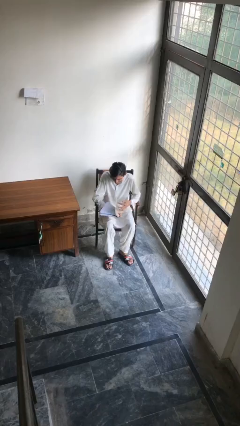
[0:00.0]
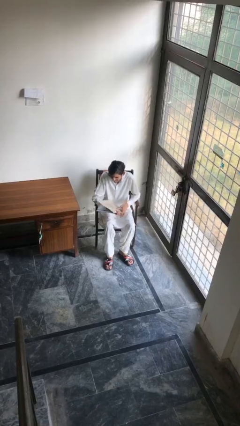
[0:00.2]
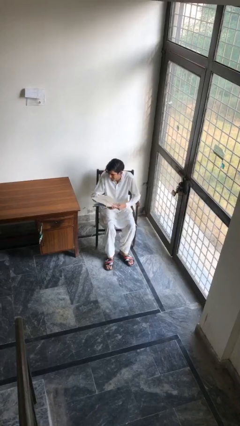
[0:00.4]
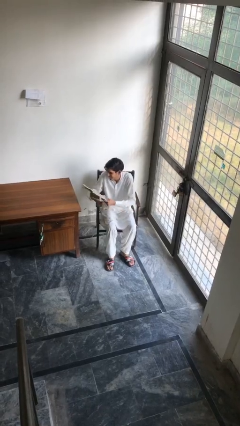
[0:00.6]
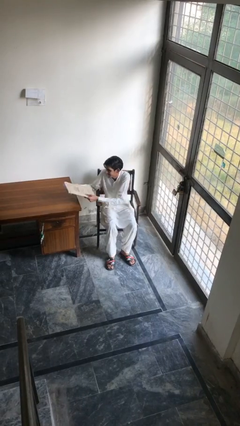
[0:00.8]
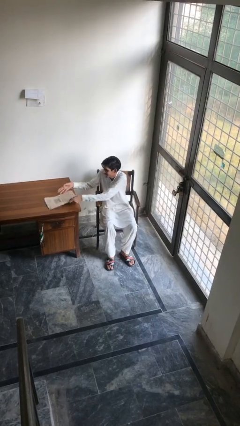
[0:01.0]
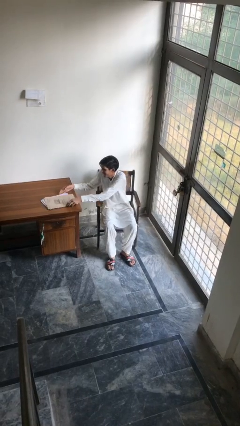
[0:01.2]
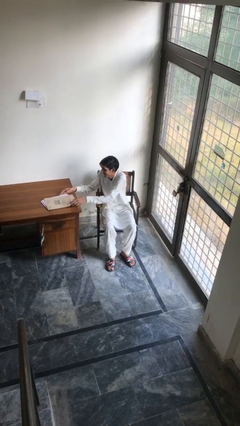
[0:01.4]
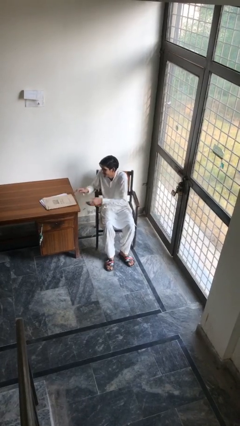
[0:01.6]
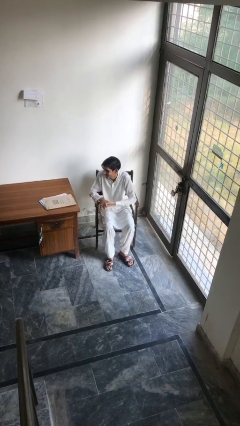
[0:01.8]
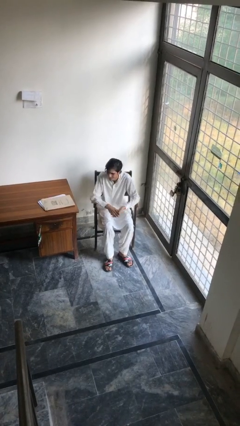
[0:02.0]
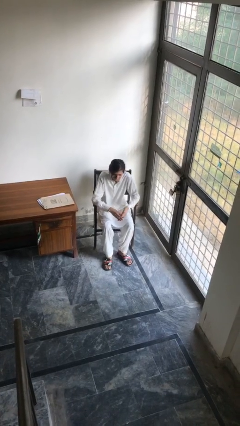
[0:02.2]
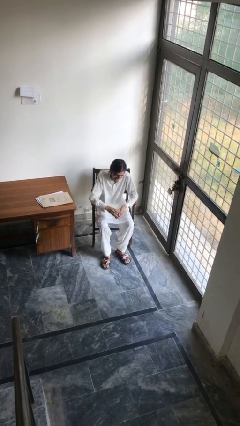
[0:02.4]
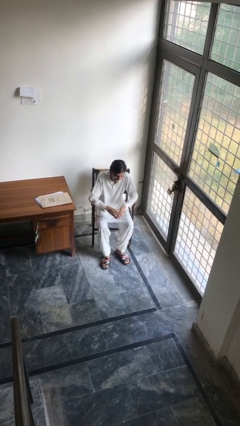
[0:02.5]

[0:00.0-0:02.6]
person puts down object on table

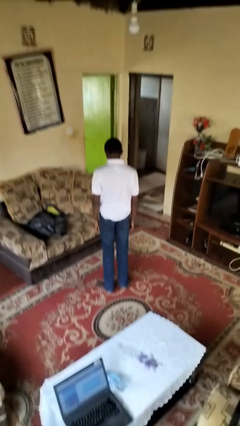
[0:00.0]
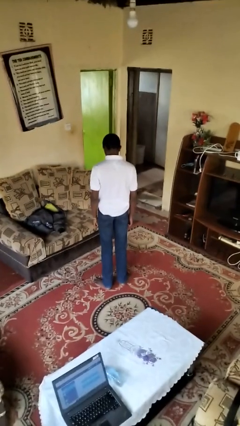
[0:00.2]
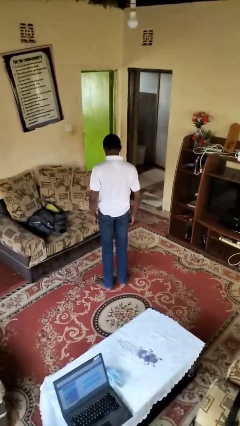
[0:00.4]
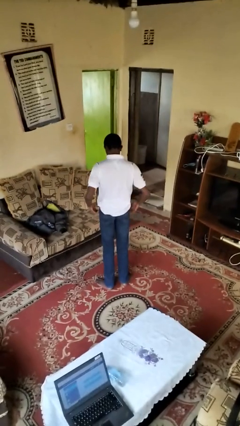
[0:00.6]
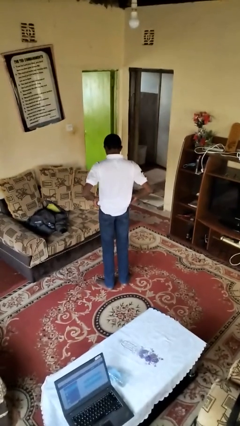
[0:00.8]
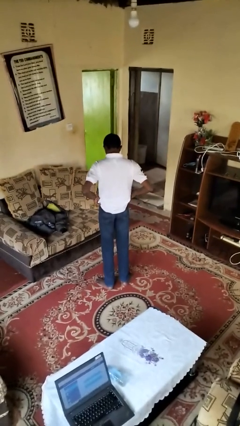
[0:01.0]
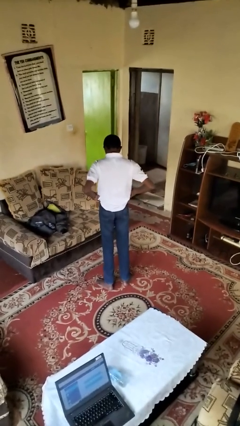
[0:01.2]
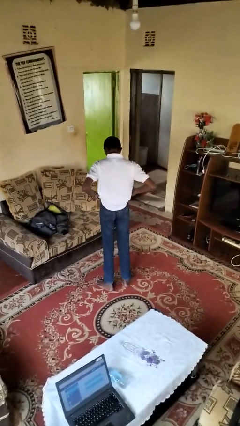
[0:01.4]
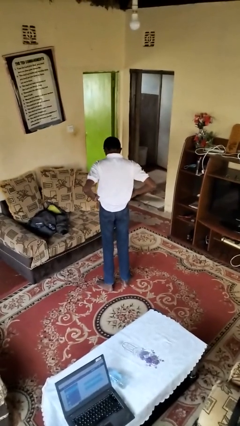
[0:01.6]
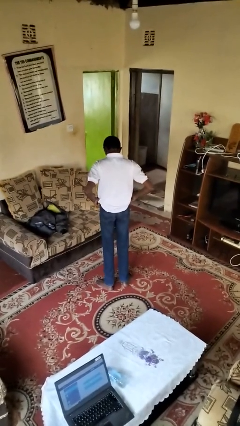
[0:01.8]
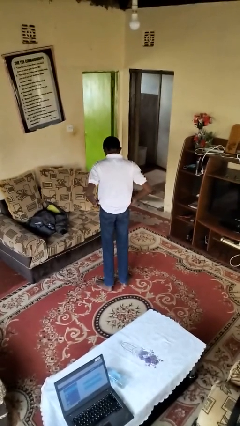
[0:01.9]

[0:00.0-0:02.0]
person hikes up pants

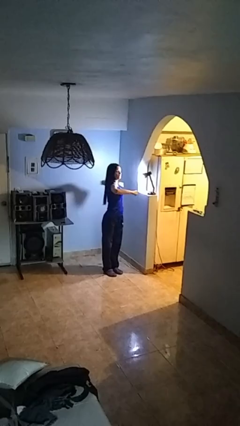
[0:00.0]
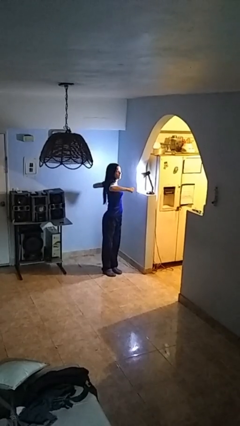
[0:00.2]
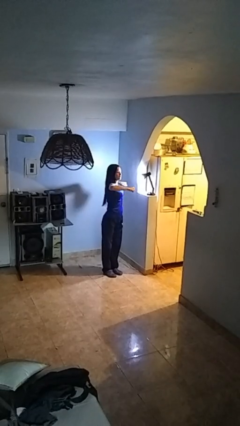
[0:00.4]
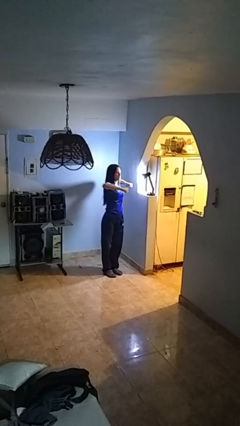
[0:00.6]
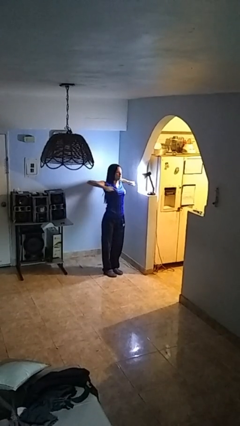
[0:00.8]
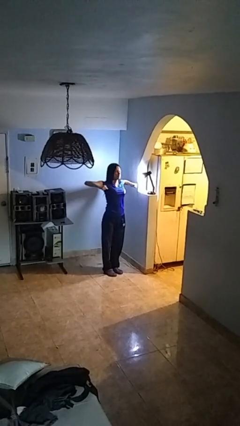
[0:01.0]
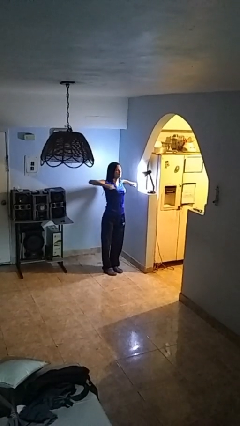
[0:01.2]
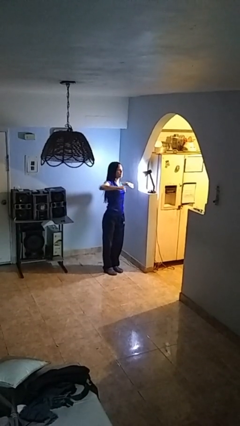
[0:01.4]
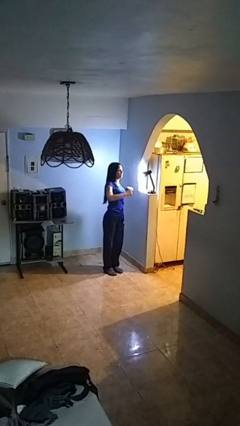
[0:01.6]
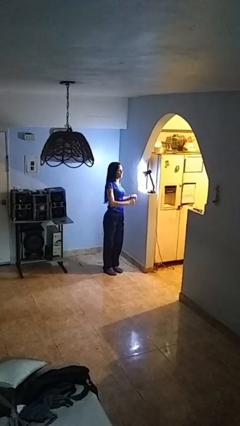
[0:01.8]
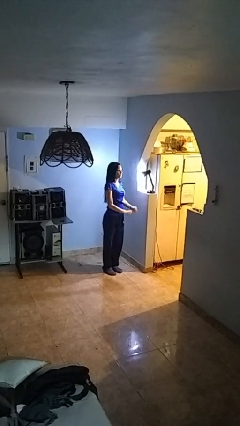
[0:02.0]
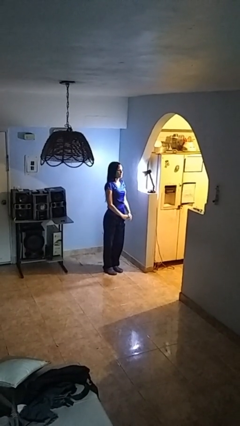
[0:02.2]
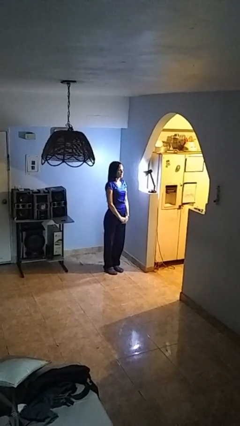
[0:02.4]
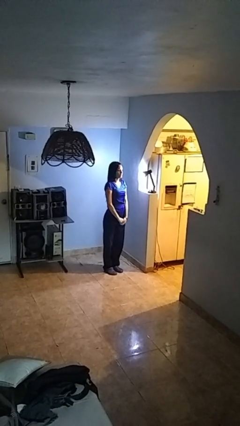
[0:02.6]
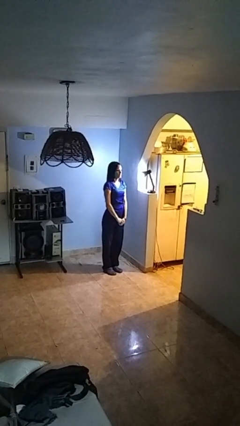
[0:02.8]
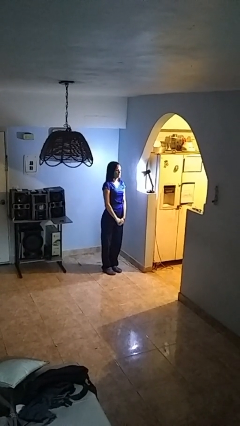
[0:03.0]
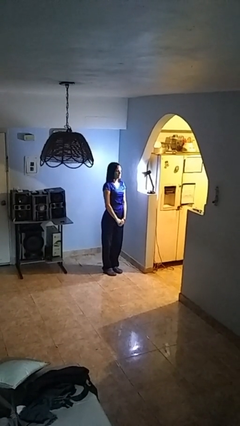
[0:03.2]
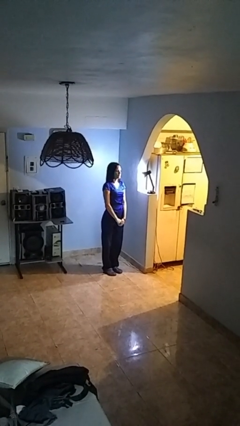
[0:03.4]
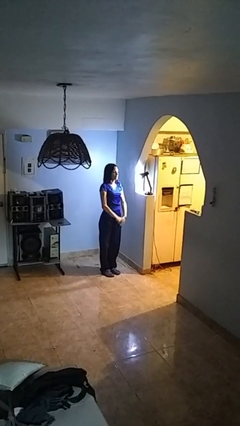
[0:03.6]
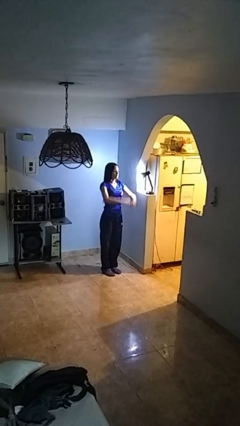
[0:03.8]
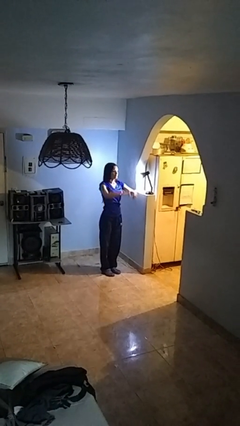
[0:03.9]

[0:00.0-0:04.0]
person stretches arms to side

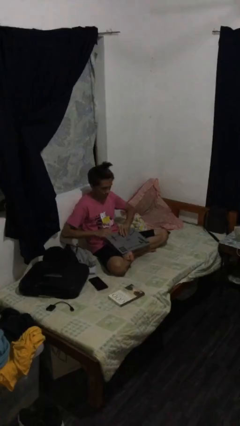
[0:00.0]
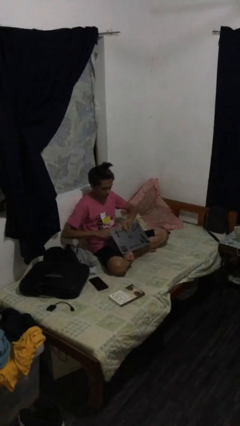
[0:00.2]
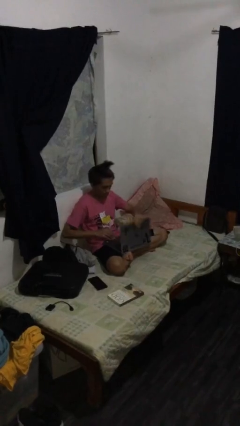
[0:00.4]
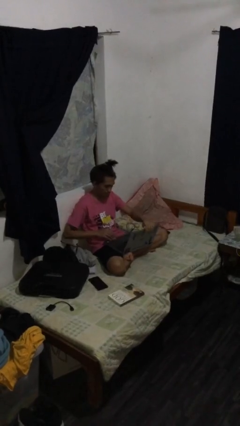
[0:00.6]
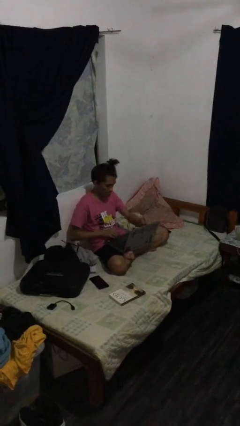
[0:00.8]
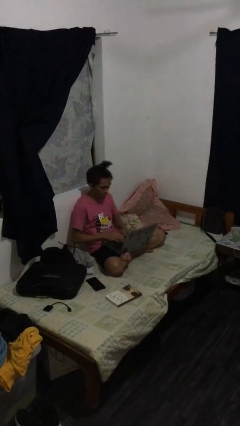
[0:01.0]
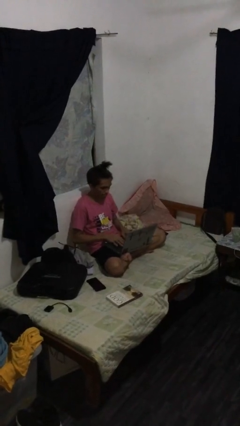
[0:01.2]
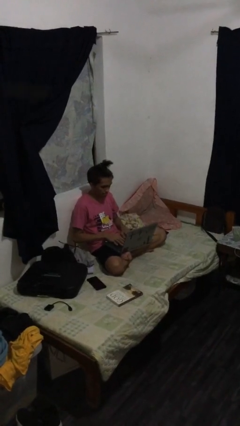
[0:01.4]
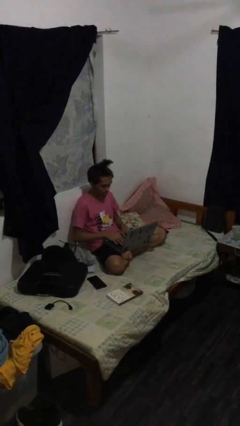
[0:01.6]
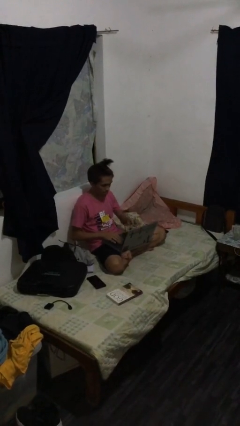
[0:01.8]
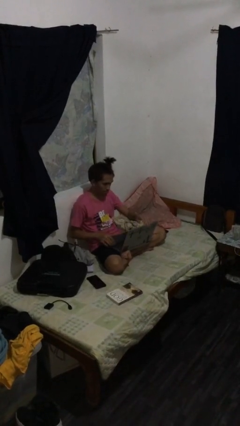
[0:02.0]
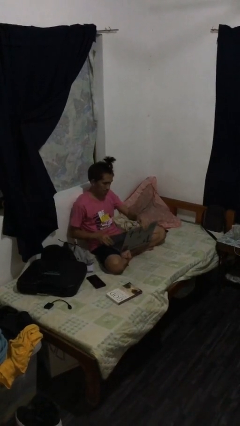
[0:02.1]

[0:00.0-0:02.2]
person interacts with laptop

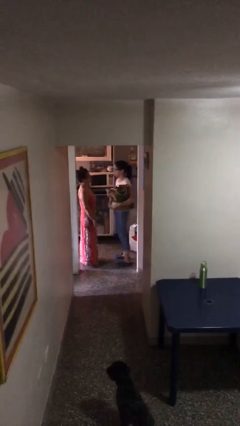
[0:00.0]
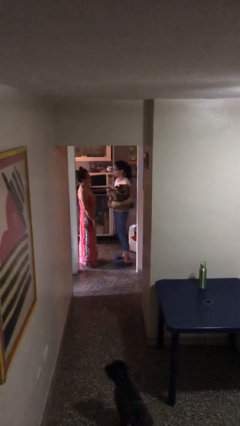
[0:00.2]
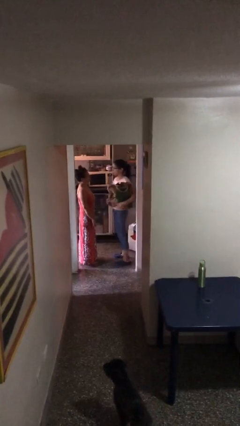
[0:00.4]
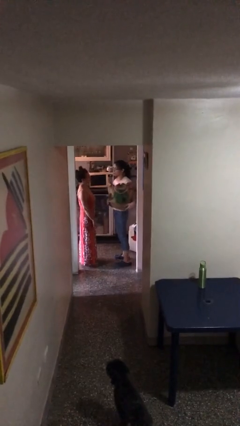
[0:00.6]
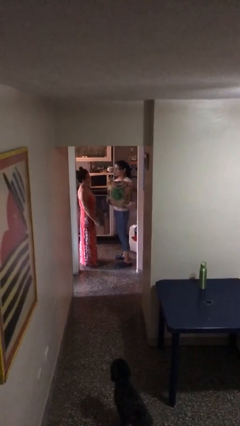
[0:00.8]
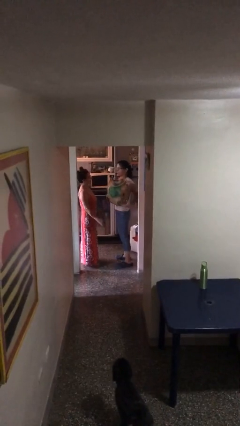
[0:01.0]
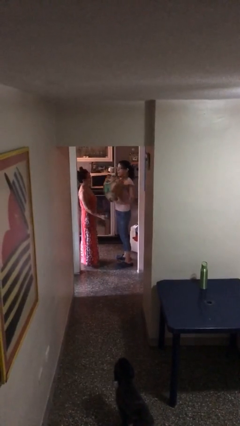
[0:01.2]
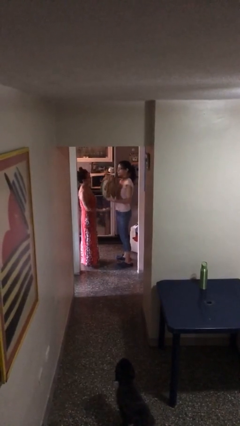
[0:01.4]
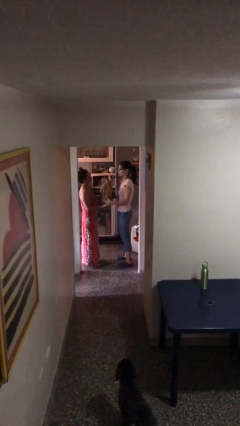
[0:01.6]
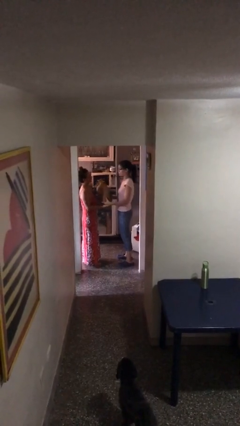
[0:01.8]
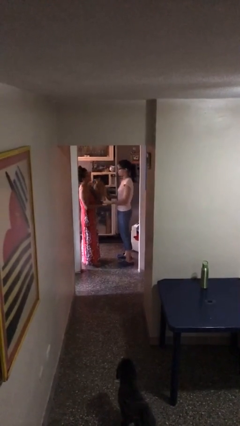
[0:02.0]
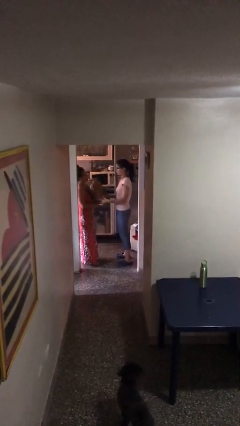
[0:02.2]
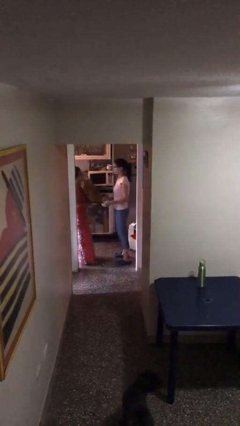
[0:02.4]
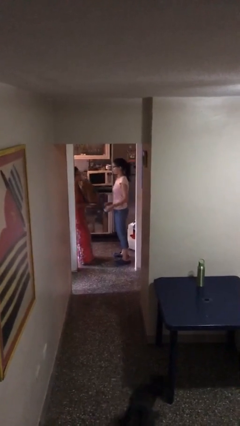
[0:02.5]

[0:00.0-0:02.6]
person transfers object to person

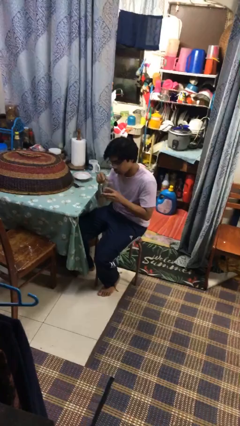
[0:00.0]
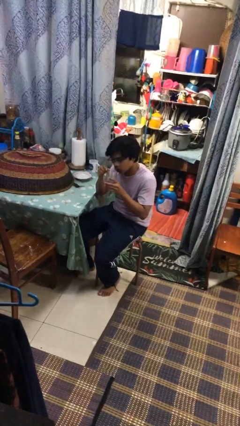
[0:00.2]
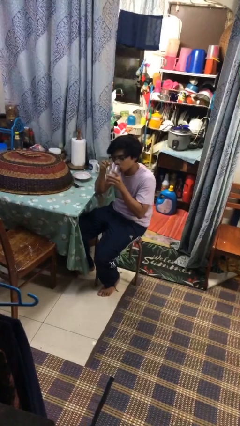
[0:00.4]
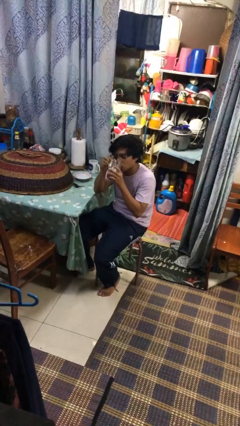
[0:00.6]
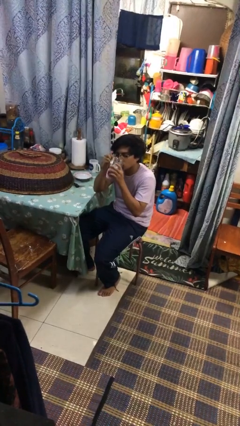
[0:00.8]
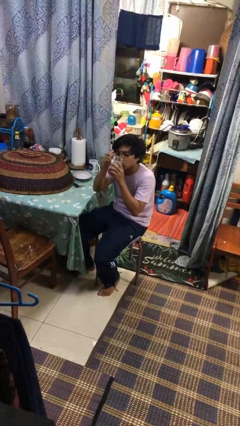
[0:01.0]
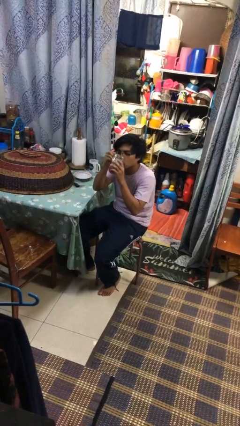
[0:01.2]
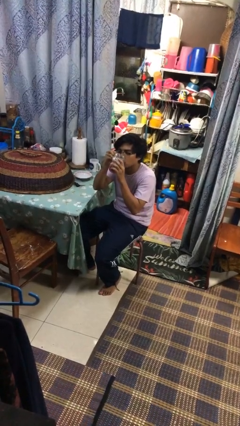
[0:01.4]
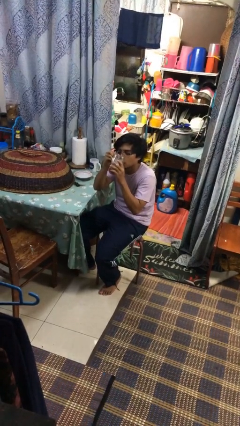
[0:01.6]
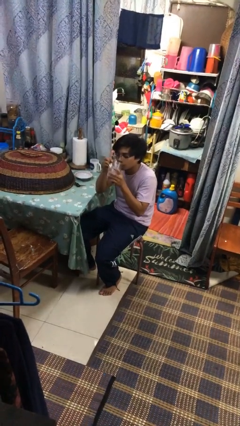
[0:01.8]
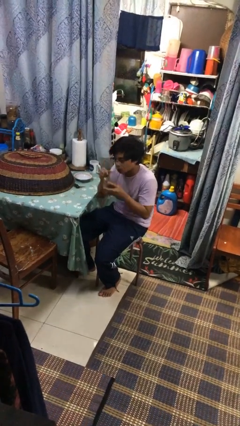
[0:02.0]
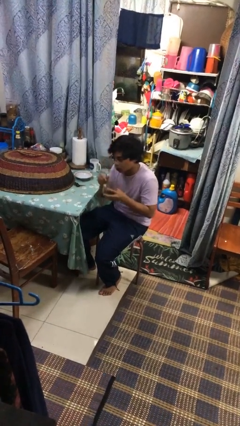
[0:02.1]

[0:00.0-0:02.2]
person drinks from mug

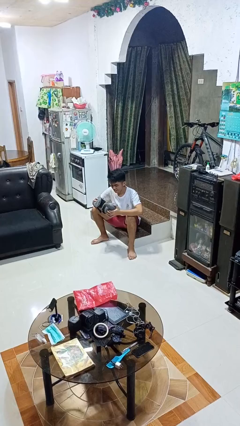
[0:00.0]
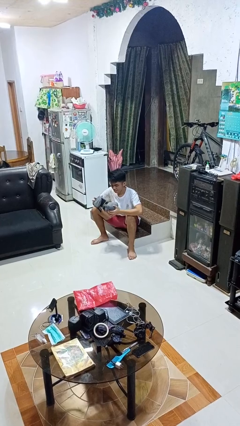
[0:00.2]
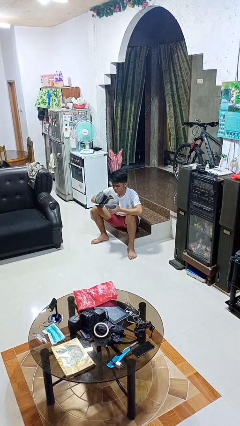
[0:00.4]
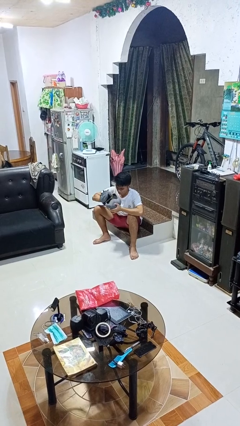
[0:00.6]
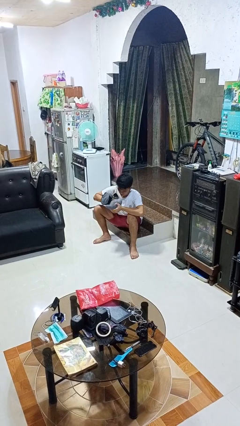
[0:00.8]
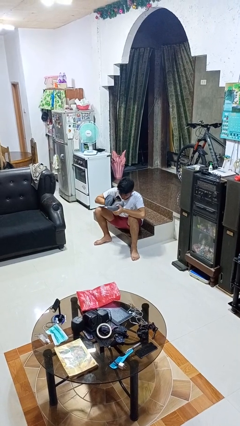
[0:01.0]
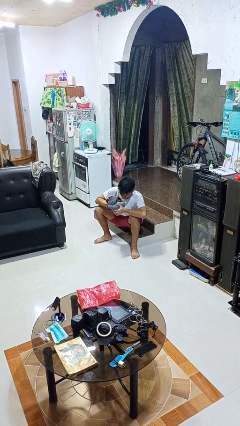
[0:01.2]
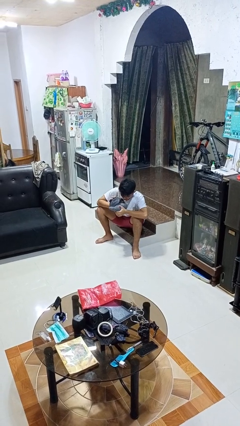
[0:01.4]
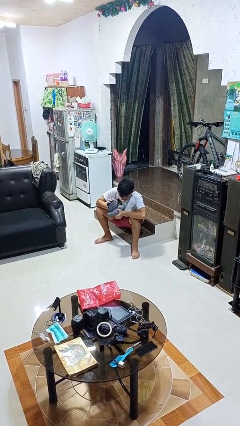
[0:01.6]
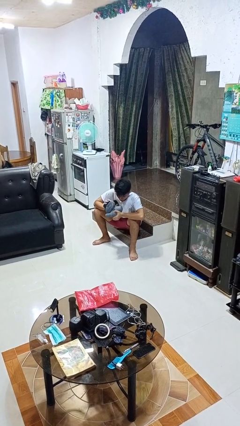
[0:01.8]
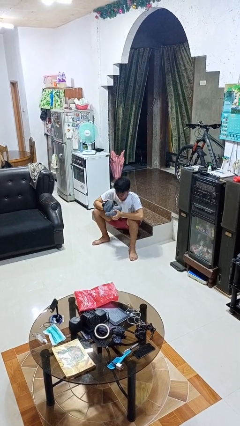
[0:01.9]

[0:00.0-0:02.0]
person squeezes object
